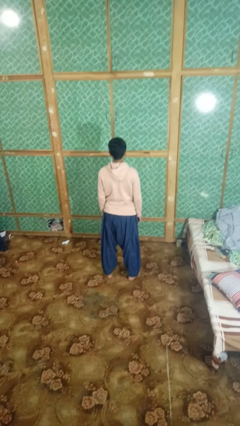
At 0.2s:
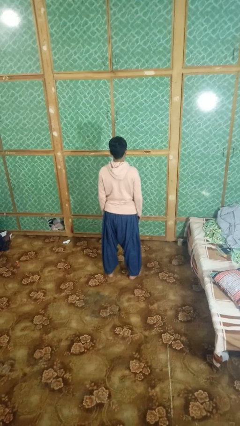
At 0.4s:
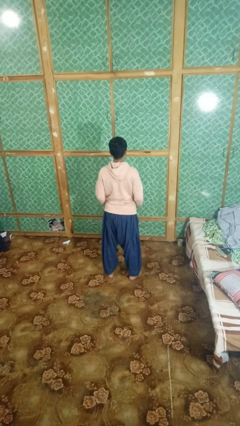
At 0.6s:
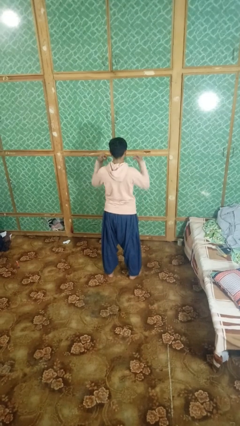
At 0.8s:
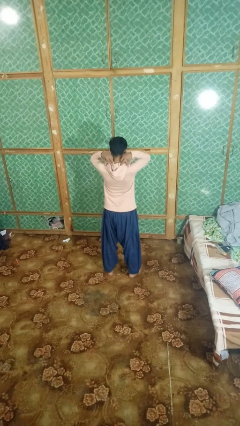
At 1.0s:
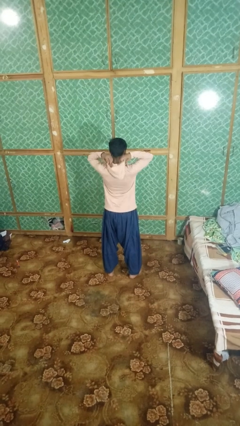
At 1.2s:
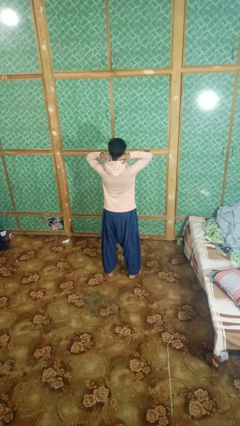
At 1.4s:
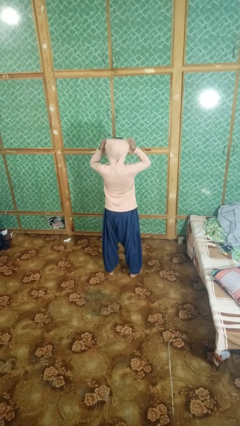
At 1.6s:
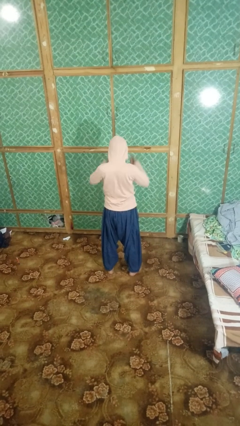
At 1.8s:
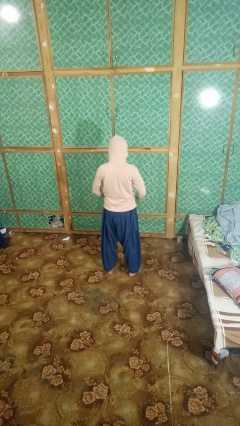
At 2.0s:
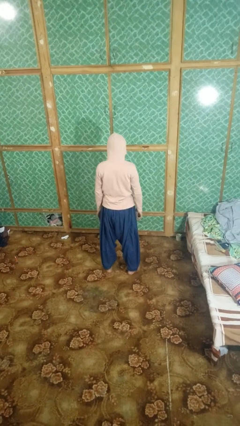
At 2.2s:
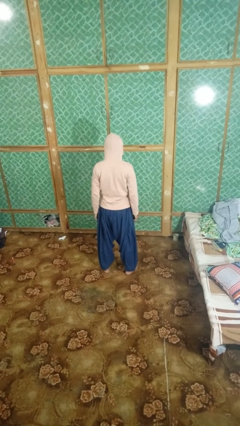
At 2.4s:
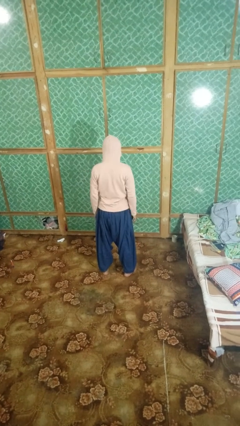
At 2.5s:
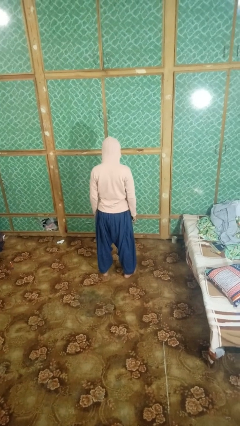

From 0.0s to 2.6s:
person puts on hoodie

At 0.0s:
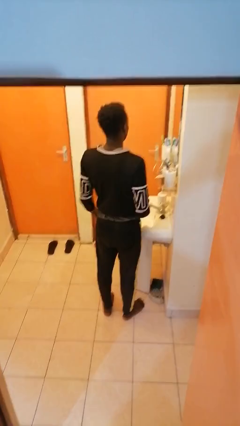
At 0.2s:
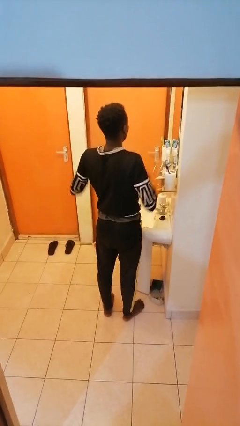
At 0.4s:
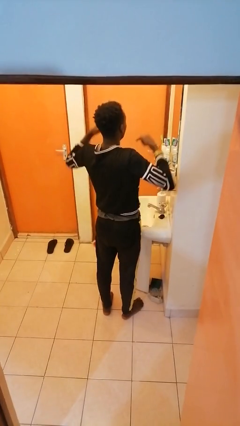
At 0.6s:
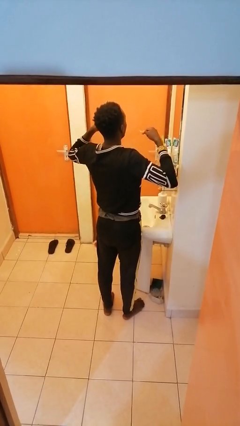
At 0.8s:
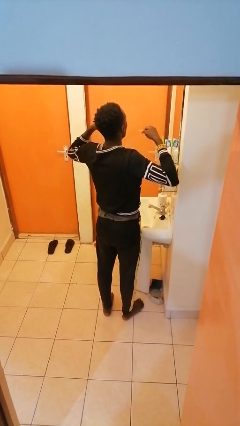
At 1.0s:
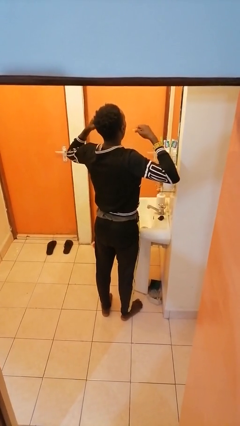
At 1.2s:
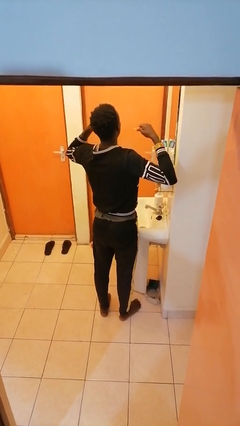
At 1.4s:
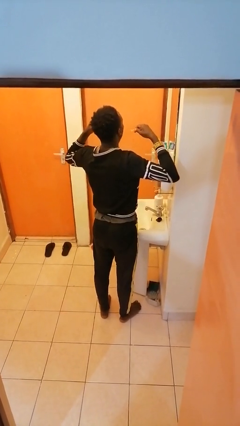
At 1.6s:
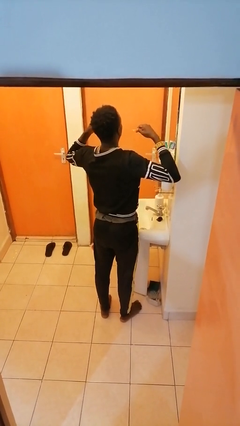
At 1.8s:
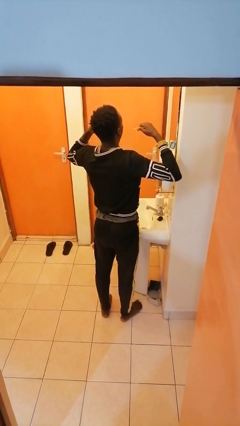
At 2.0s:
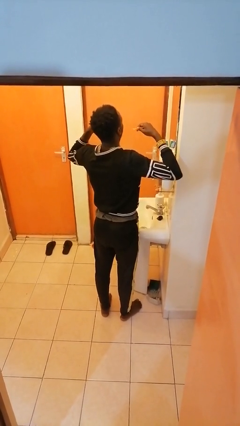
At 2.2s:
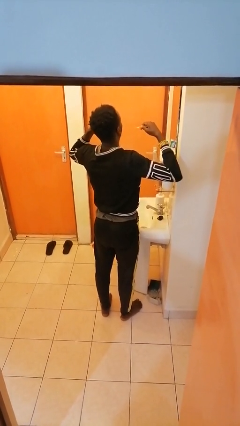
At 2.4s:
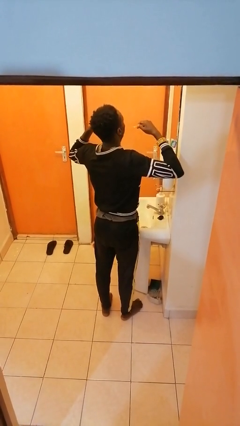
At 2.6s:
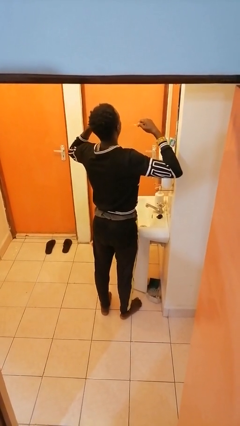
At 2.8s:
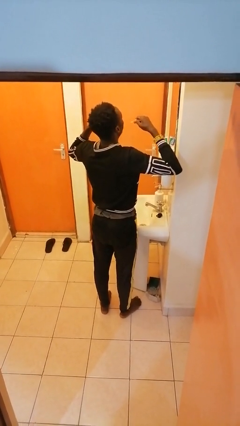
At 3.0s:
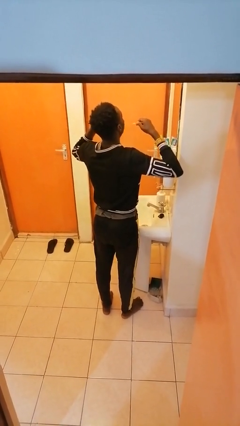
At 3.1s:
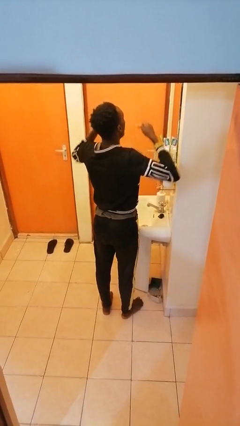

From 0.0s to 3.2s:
person flosses

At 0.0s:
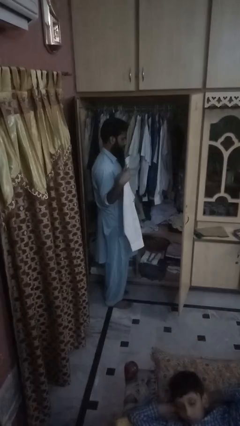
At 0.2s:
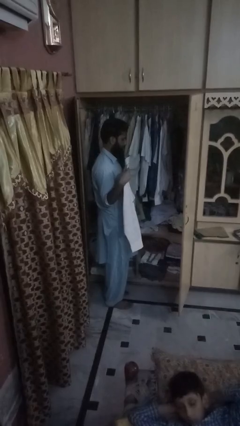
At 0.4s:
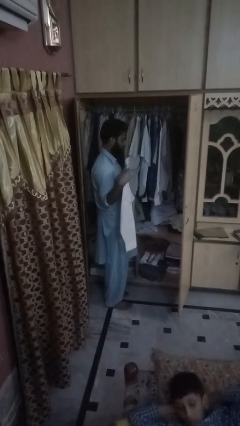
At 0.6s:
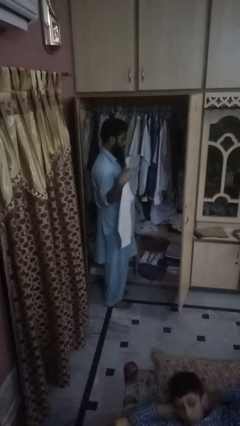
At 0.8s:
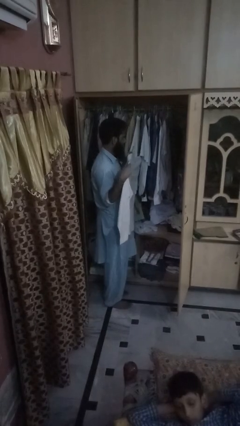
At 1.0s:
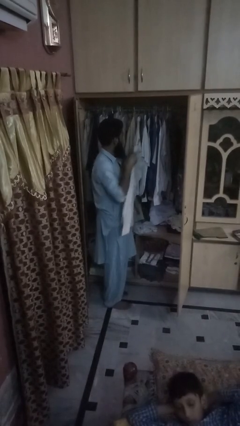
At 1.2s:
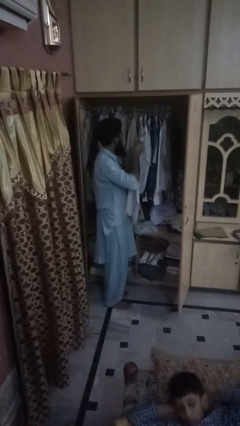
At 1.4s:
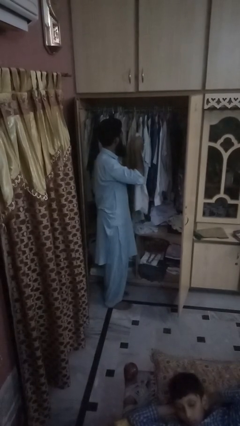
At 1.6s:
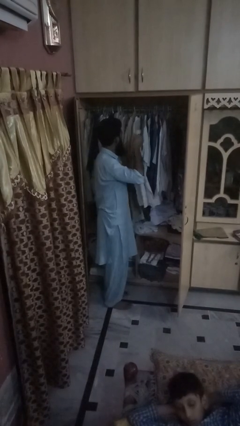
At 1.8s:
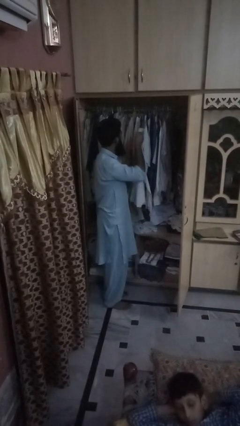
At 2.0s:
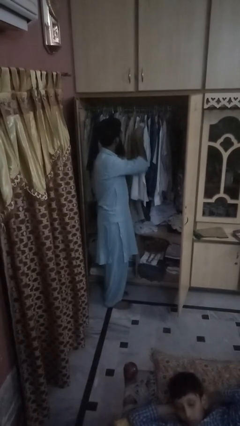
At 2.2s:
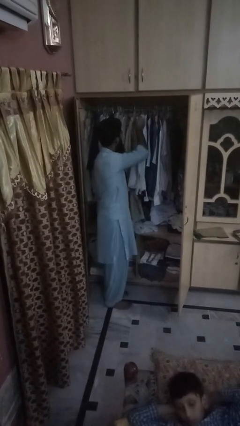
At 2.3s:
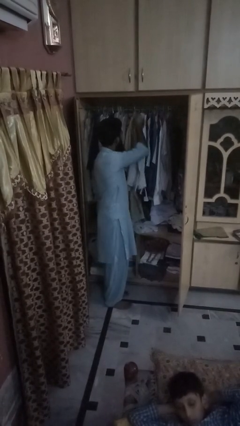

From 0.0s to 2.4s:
person takes clothes from closet

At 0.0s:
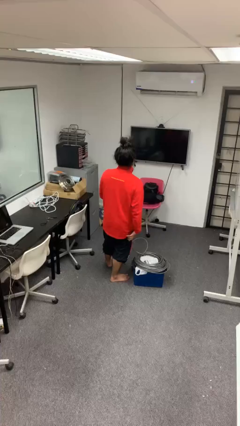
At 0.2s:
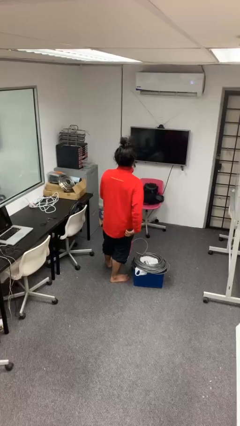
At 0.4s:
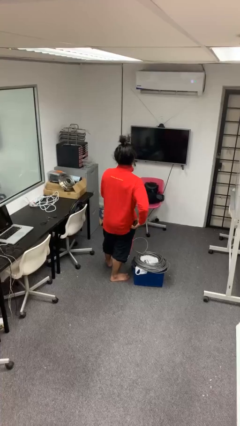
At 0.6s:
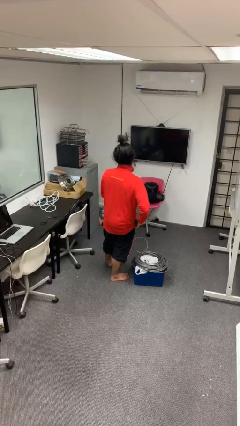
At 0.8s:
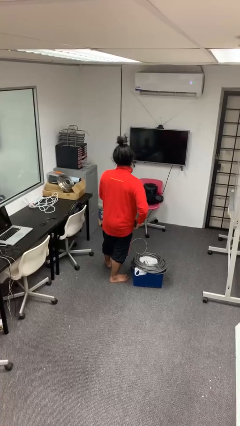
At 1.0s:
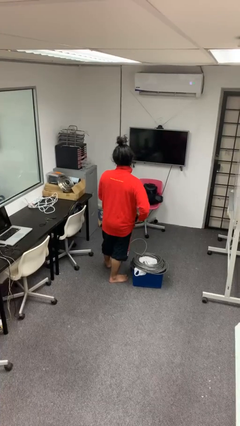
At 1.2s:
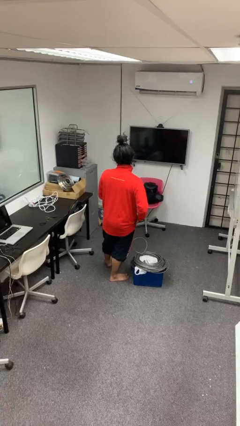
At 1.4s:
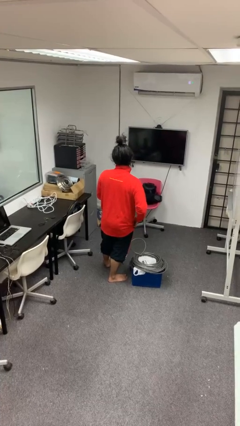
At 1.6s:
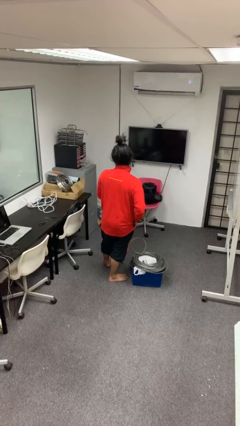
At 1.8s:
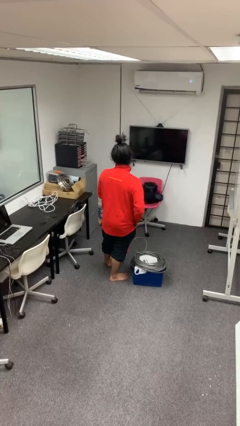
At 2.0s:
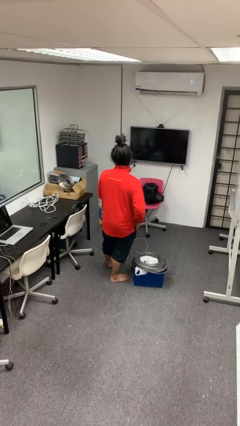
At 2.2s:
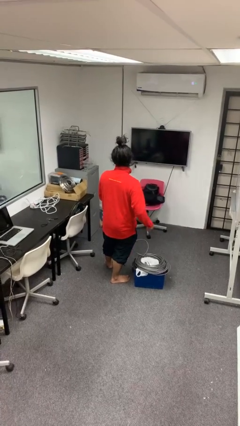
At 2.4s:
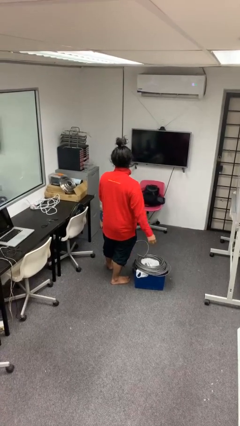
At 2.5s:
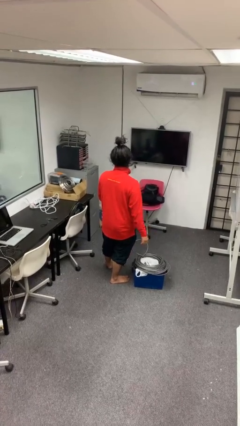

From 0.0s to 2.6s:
person puts phone into pocket

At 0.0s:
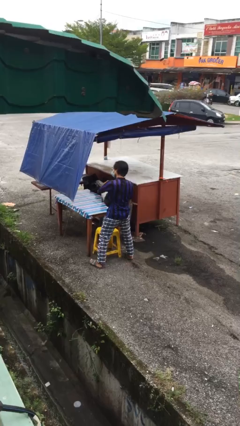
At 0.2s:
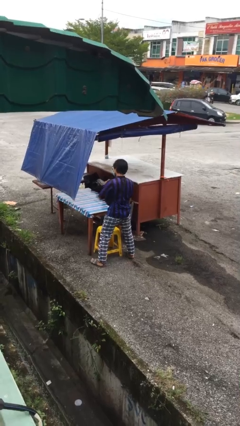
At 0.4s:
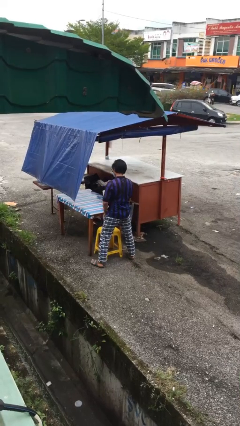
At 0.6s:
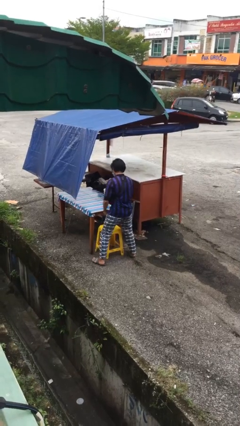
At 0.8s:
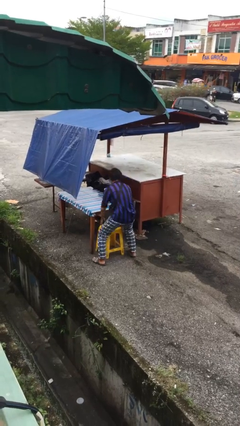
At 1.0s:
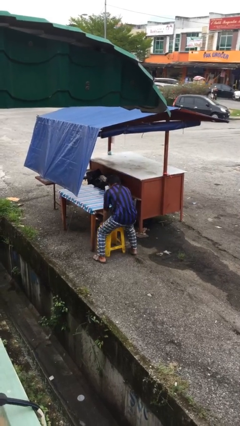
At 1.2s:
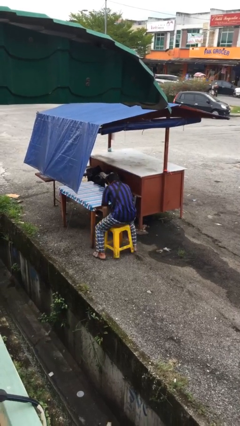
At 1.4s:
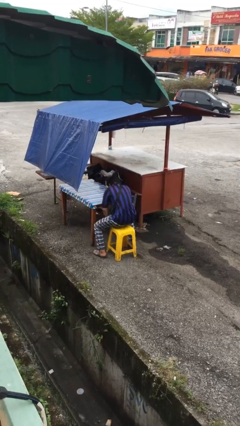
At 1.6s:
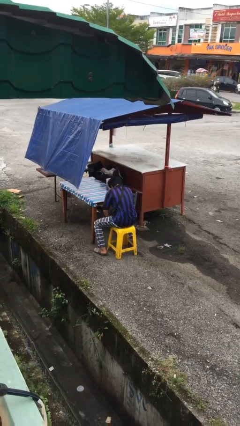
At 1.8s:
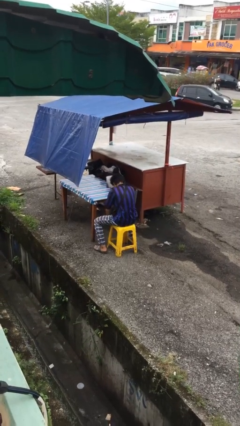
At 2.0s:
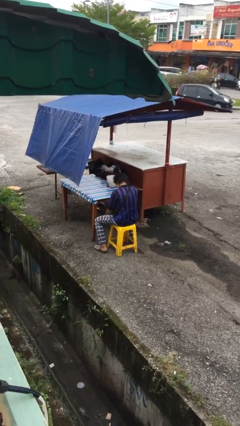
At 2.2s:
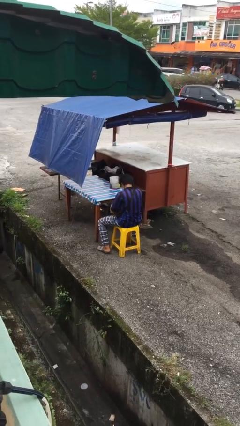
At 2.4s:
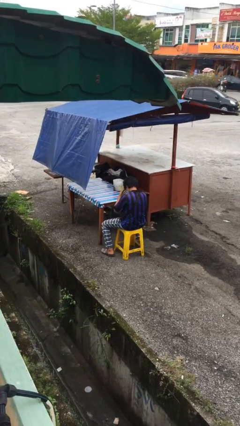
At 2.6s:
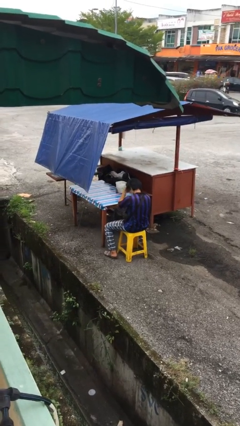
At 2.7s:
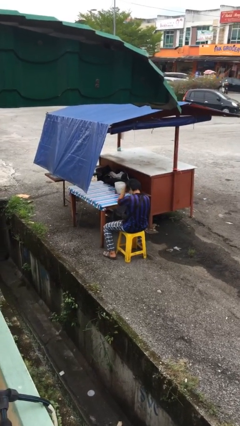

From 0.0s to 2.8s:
person sits down

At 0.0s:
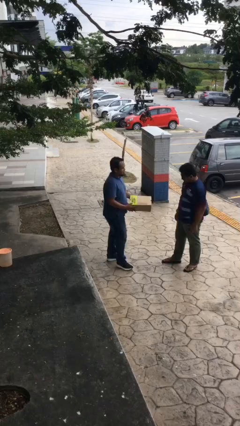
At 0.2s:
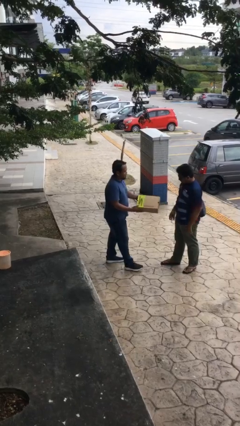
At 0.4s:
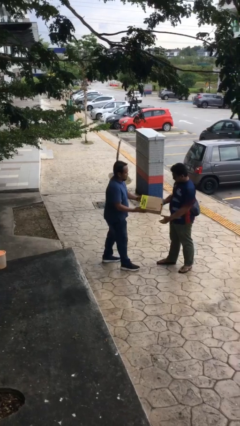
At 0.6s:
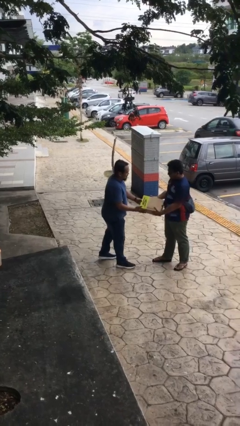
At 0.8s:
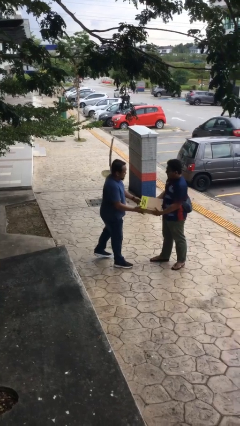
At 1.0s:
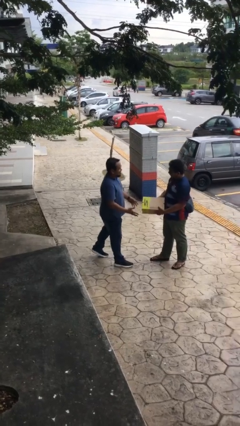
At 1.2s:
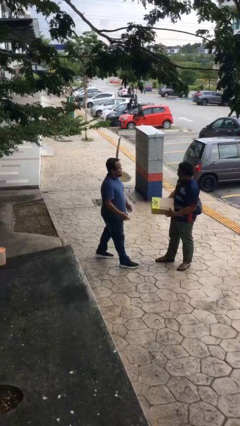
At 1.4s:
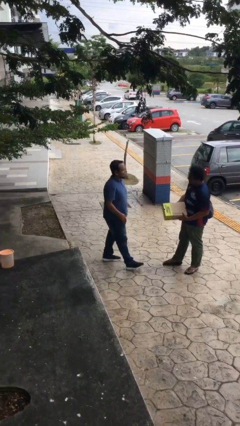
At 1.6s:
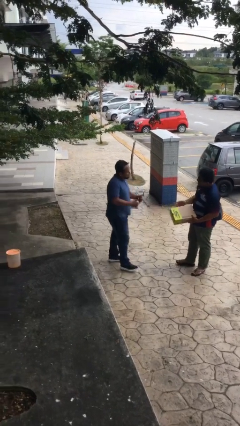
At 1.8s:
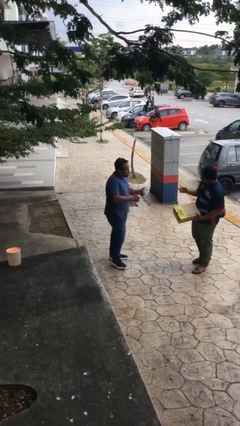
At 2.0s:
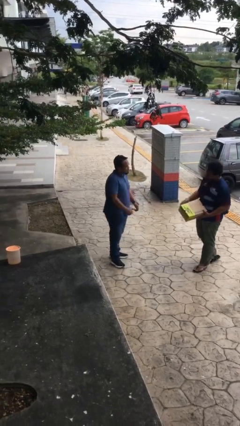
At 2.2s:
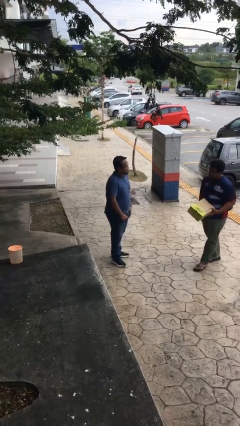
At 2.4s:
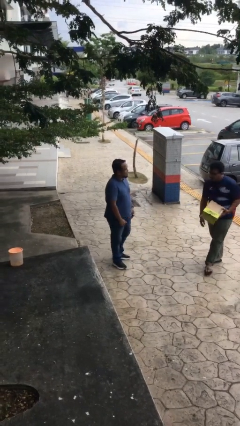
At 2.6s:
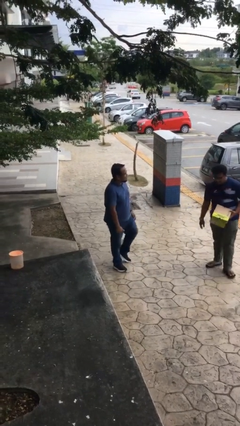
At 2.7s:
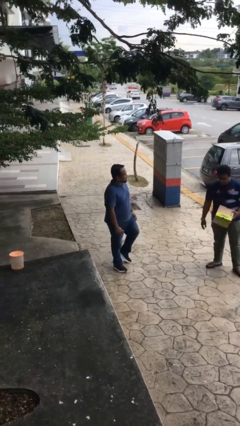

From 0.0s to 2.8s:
person transfers object to person

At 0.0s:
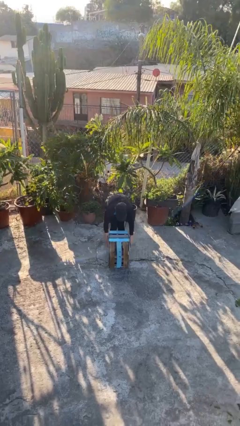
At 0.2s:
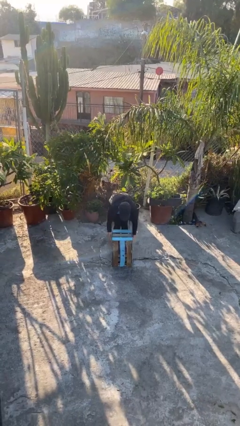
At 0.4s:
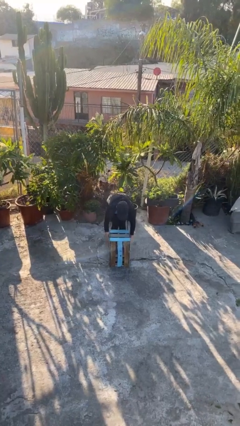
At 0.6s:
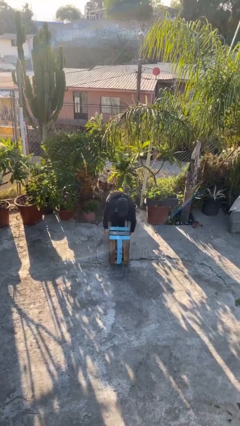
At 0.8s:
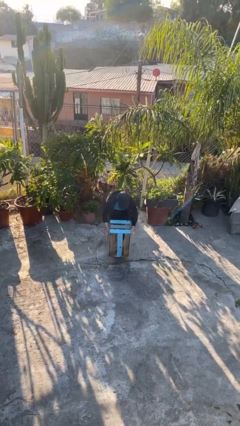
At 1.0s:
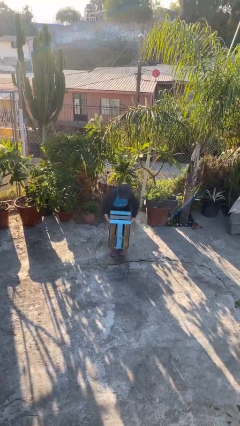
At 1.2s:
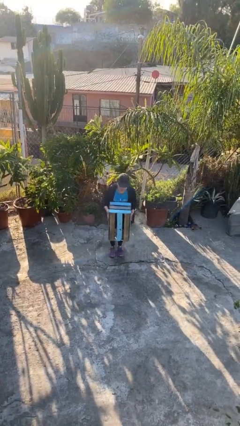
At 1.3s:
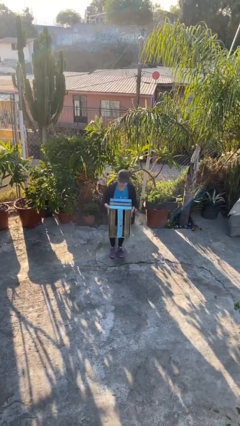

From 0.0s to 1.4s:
person picks up object from floor
